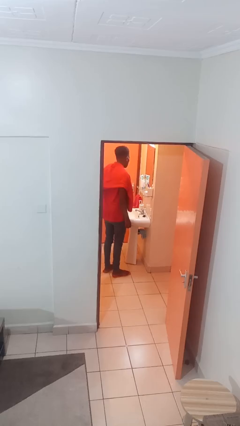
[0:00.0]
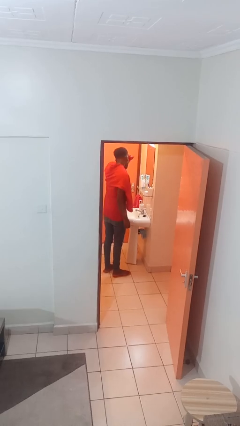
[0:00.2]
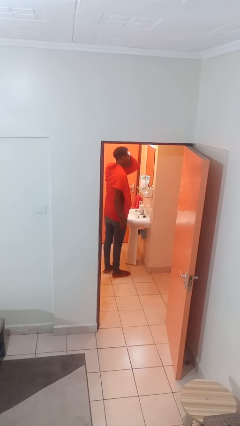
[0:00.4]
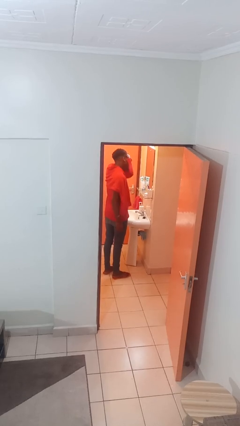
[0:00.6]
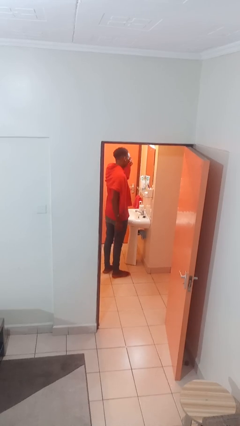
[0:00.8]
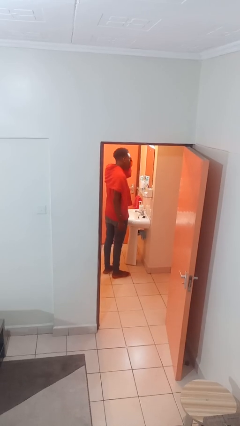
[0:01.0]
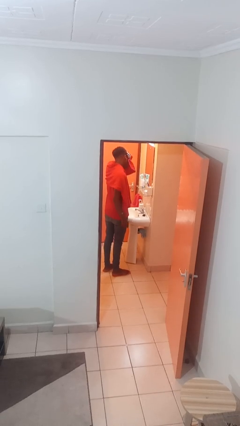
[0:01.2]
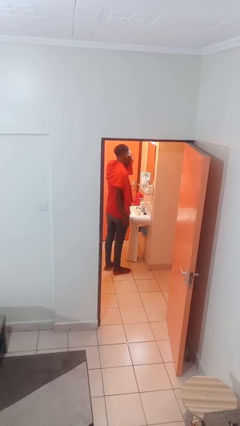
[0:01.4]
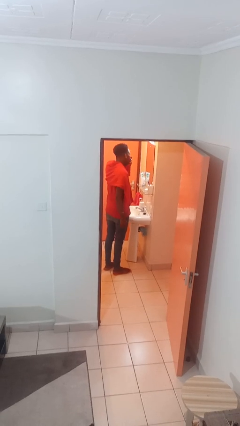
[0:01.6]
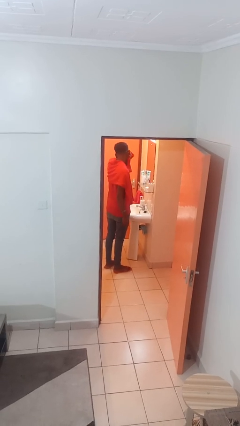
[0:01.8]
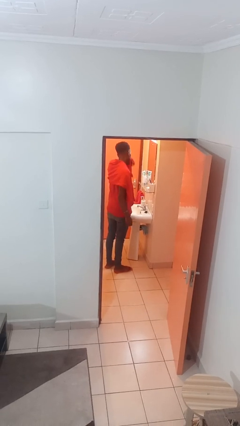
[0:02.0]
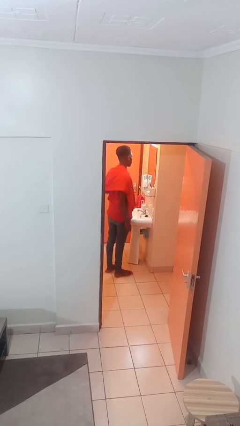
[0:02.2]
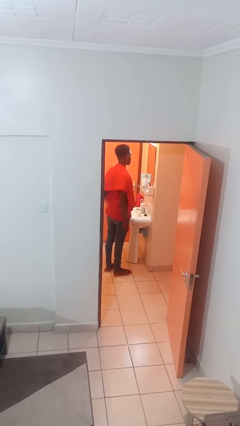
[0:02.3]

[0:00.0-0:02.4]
person dries face with towel

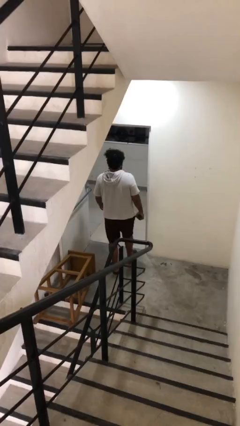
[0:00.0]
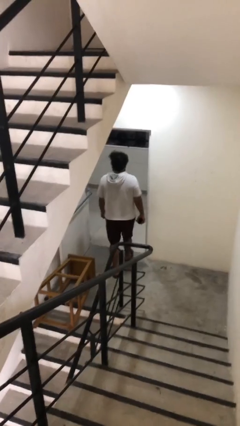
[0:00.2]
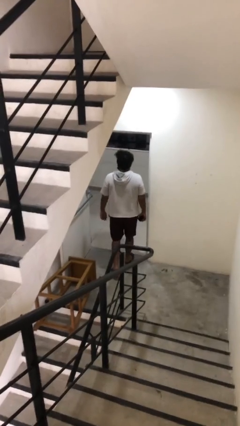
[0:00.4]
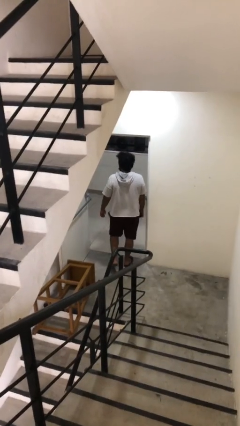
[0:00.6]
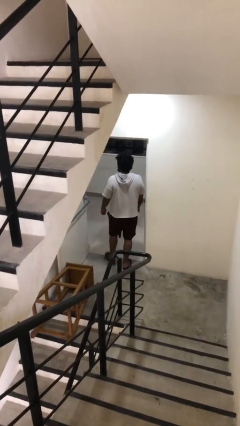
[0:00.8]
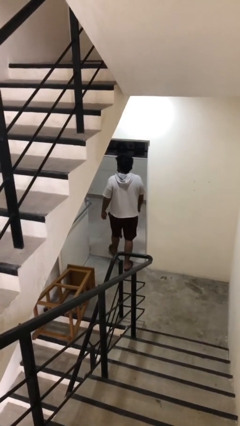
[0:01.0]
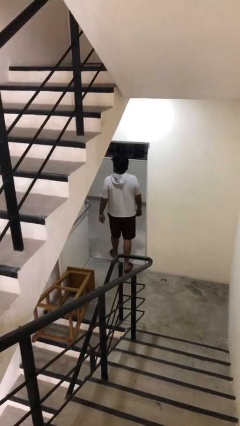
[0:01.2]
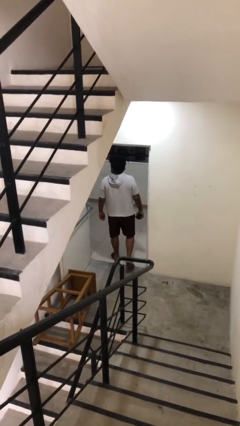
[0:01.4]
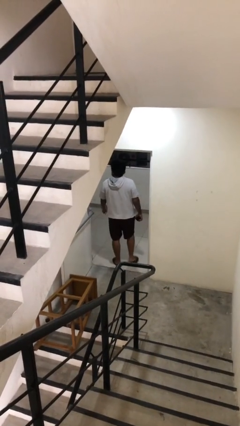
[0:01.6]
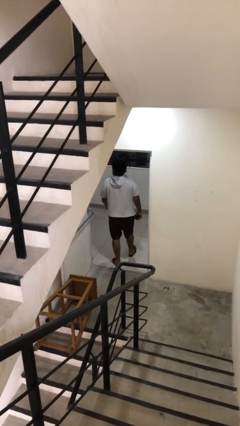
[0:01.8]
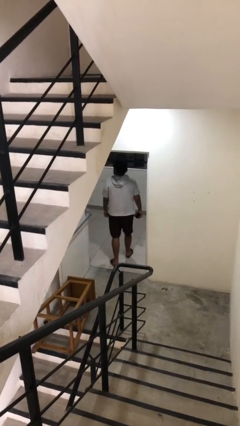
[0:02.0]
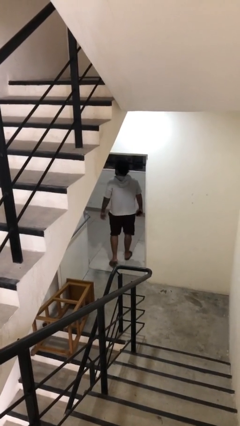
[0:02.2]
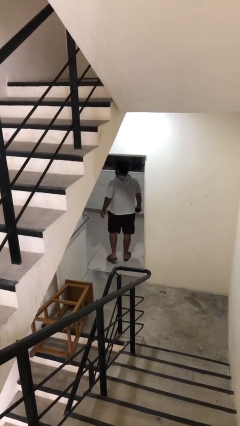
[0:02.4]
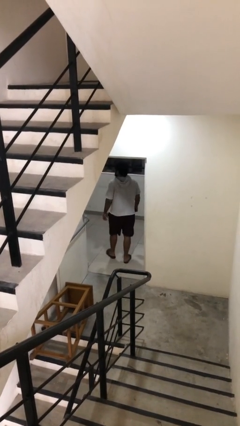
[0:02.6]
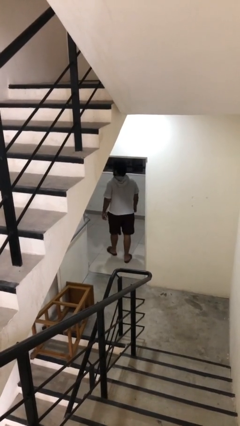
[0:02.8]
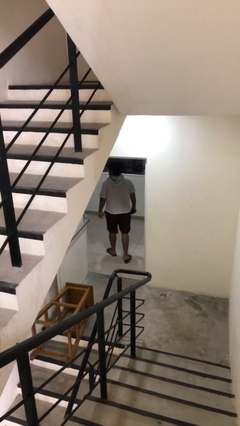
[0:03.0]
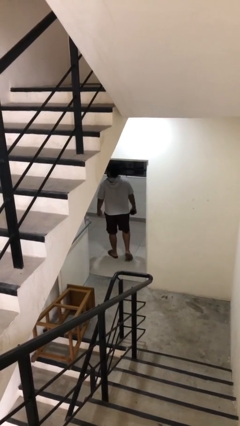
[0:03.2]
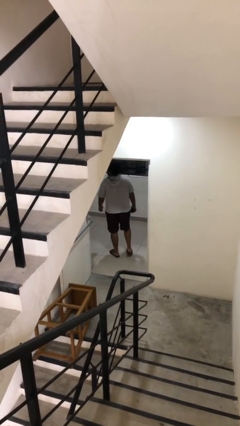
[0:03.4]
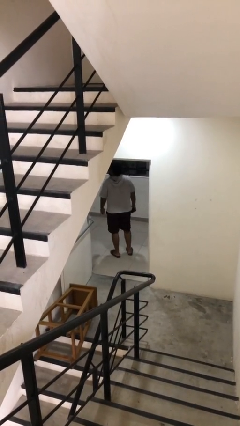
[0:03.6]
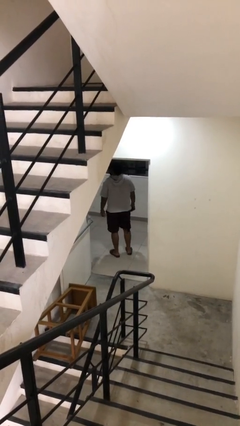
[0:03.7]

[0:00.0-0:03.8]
person exits scene through structure

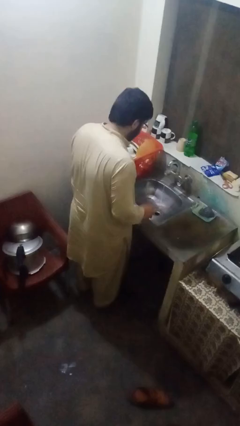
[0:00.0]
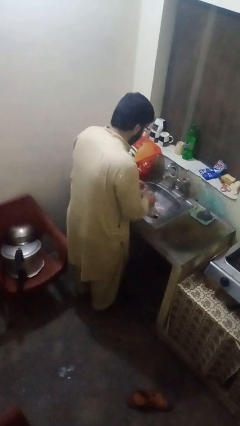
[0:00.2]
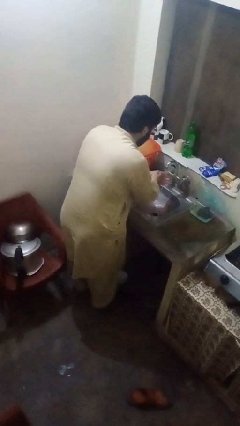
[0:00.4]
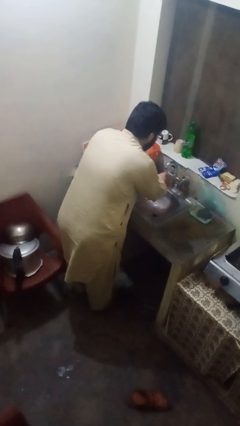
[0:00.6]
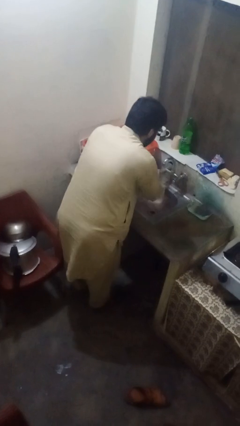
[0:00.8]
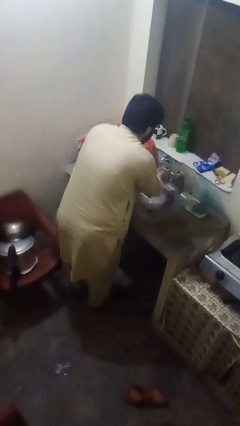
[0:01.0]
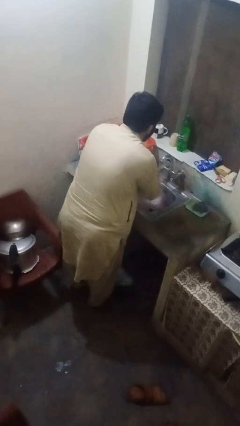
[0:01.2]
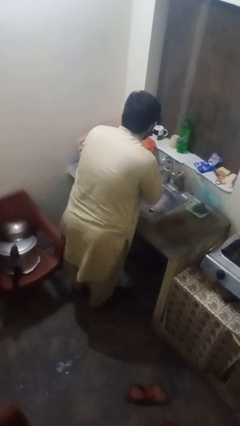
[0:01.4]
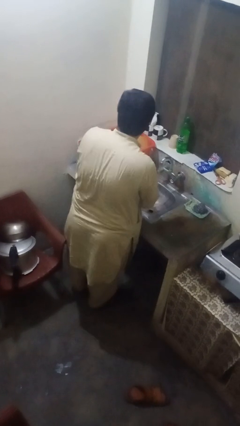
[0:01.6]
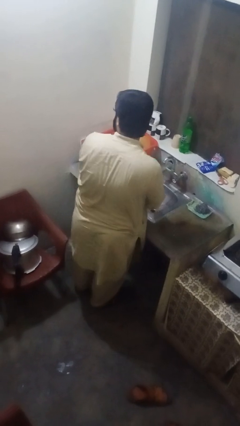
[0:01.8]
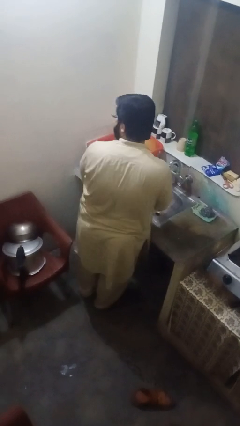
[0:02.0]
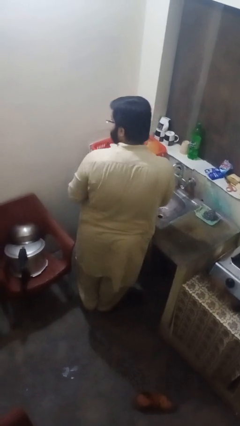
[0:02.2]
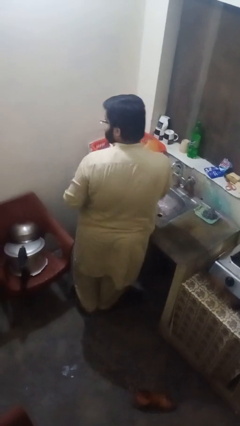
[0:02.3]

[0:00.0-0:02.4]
person washes hands

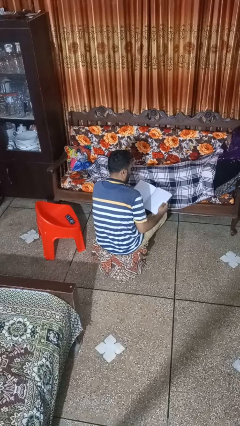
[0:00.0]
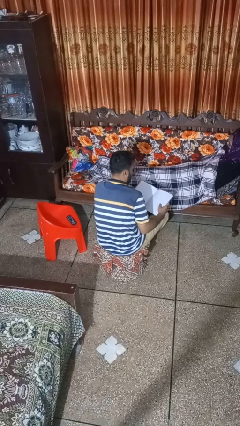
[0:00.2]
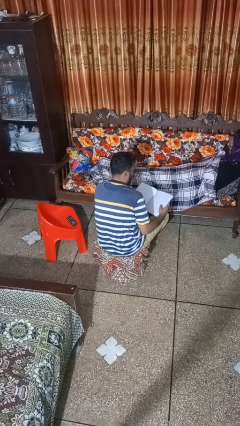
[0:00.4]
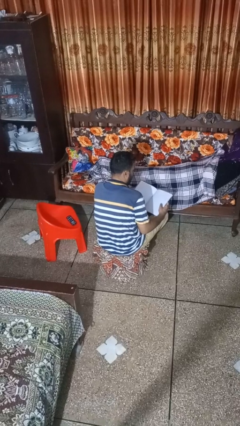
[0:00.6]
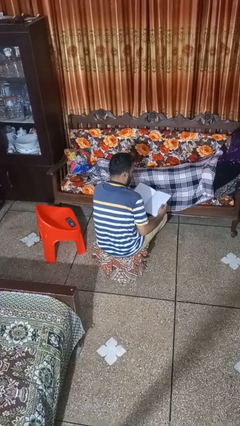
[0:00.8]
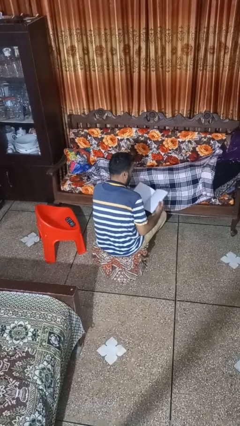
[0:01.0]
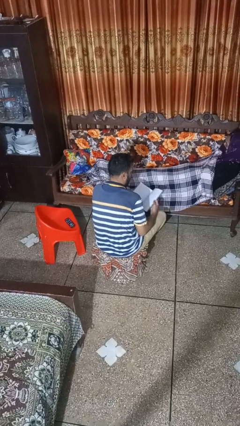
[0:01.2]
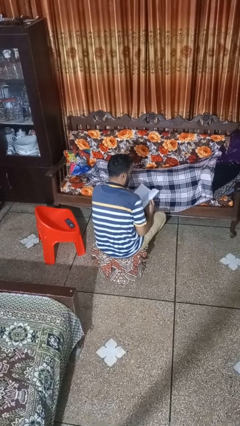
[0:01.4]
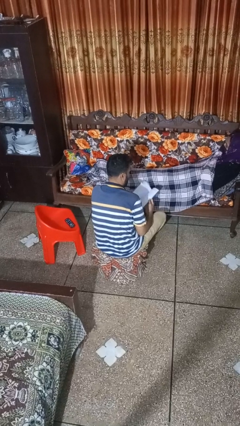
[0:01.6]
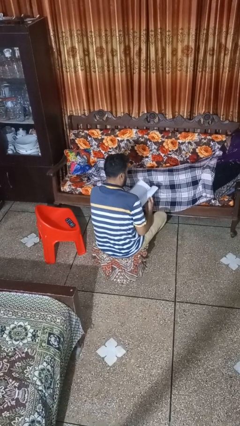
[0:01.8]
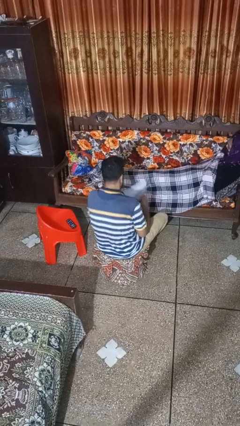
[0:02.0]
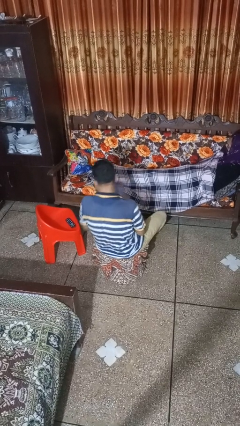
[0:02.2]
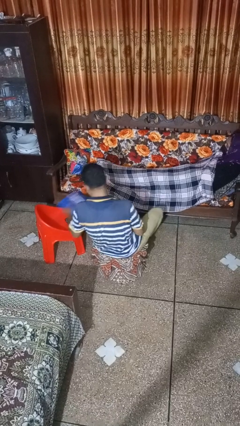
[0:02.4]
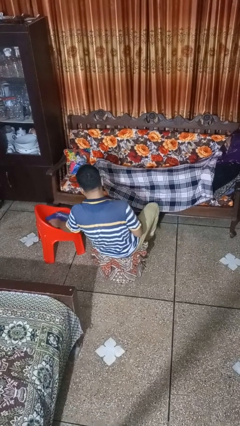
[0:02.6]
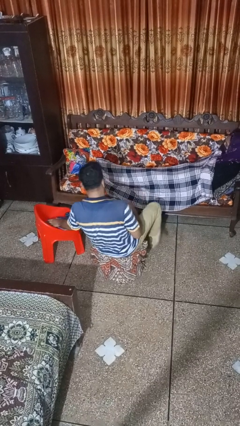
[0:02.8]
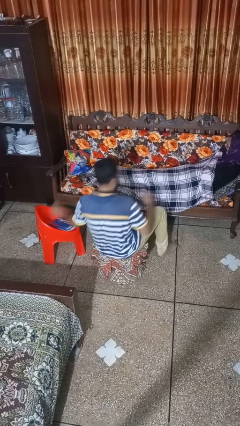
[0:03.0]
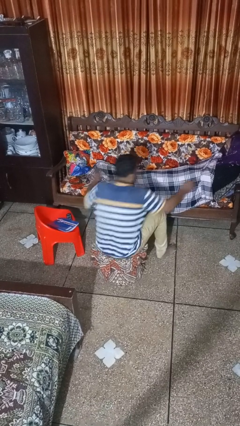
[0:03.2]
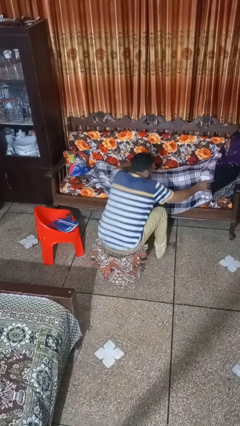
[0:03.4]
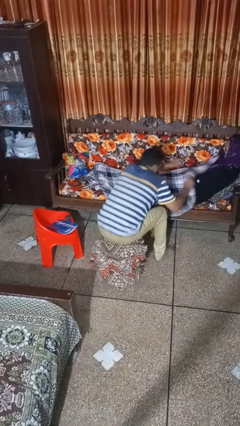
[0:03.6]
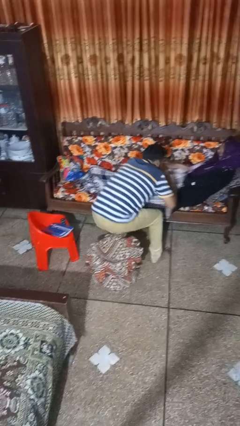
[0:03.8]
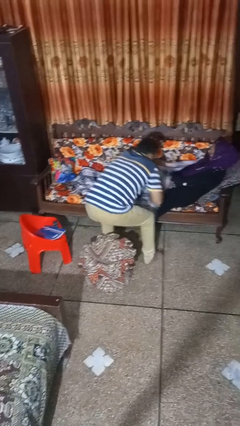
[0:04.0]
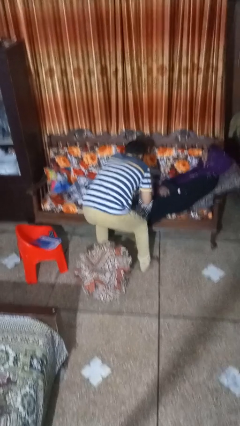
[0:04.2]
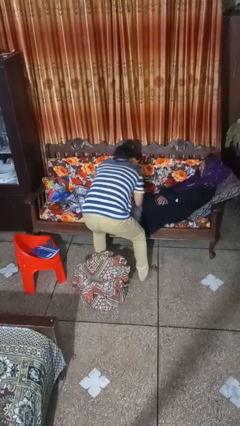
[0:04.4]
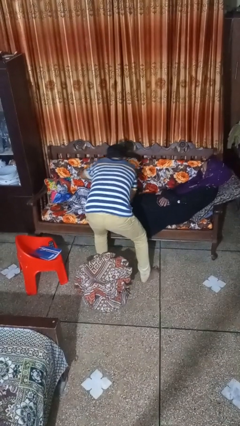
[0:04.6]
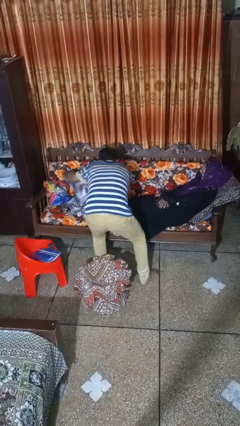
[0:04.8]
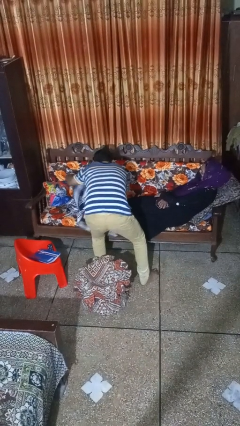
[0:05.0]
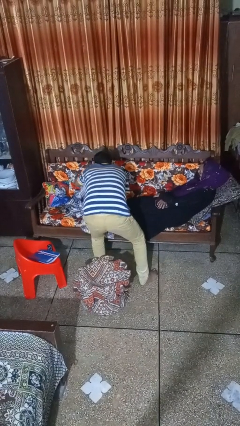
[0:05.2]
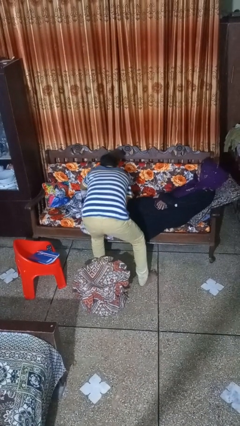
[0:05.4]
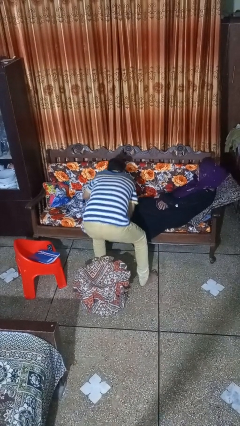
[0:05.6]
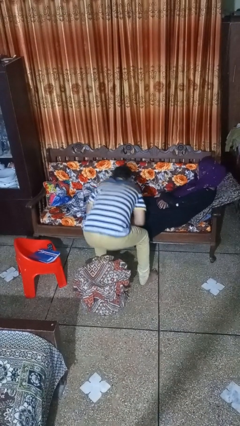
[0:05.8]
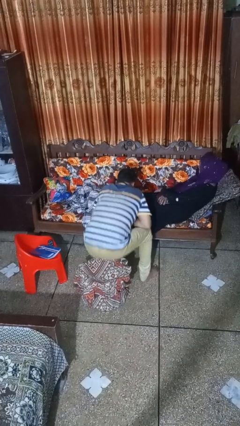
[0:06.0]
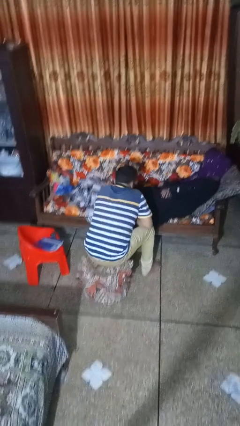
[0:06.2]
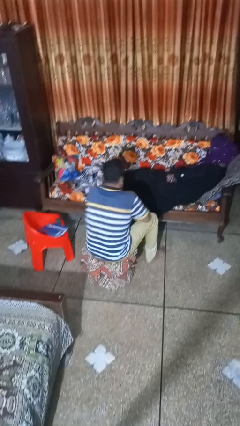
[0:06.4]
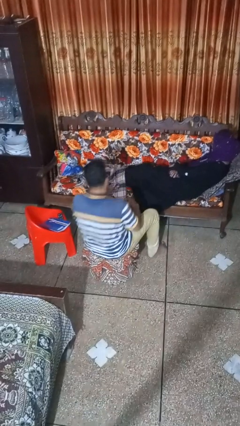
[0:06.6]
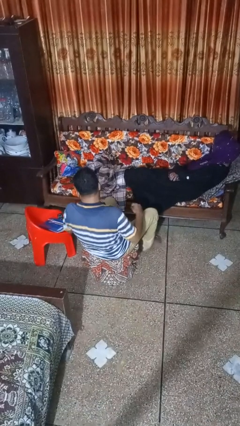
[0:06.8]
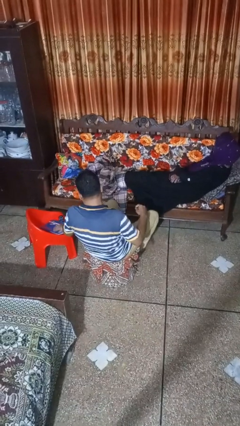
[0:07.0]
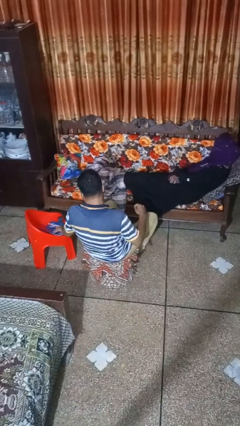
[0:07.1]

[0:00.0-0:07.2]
person uncovers friend with blanket

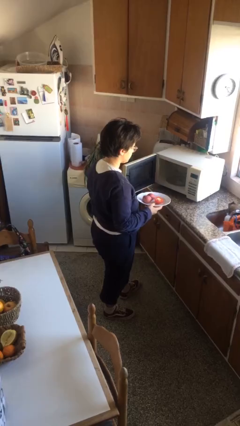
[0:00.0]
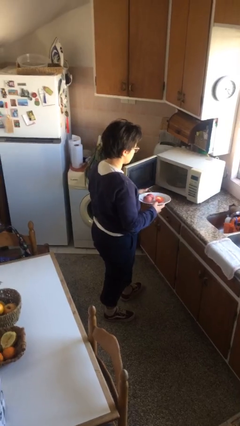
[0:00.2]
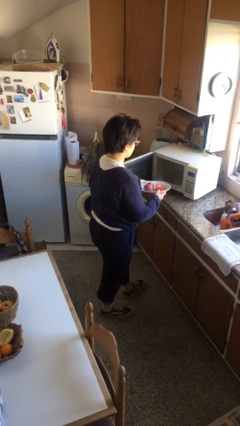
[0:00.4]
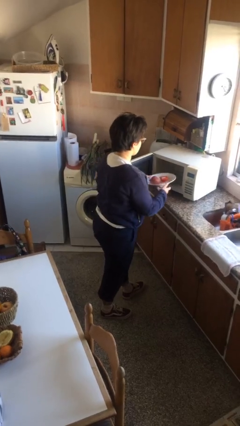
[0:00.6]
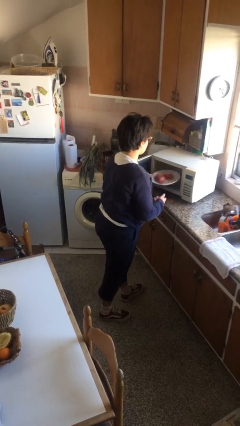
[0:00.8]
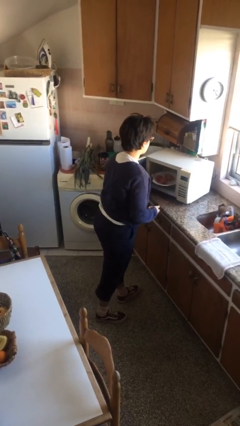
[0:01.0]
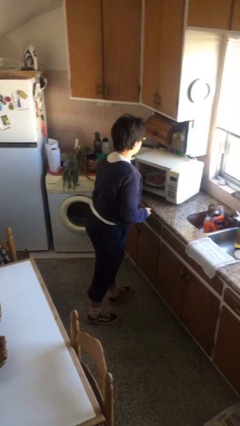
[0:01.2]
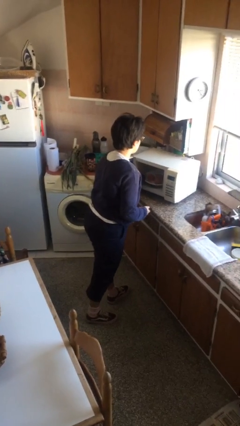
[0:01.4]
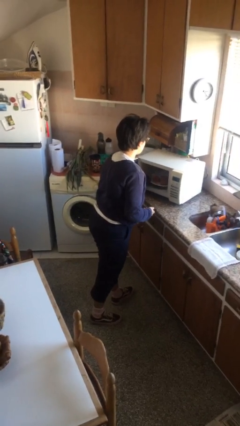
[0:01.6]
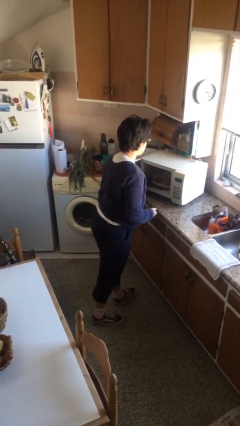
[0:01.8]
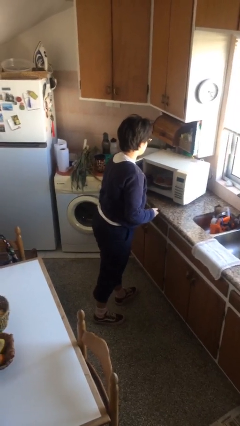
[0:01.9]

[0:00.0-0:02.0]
person puts object into microwave
